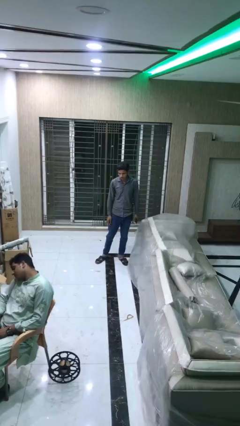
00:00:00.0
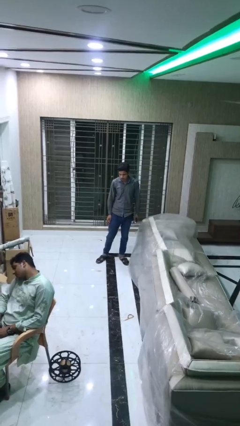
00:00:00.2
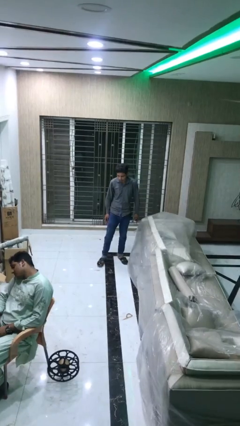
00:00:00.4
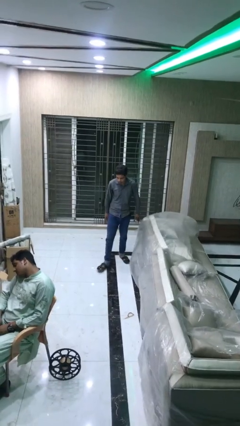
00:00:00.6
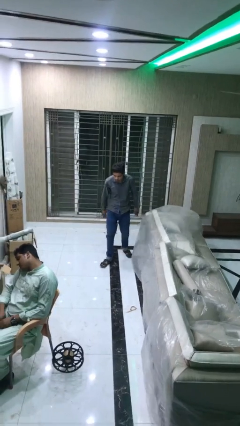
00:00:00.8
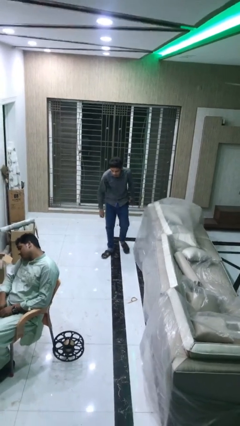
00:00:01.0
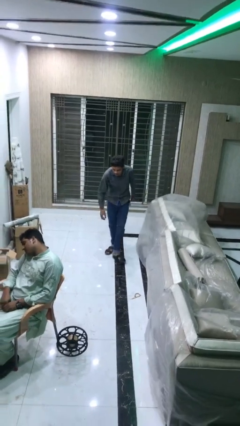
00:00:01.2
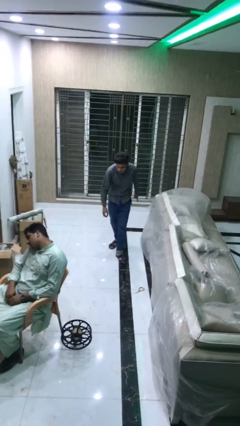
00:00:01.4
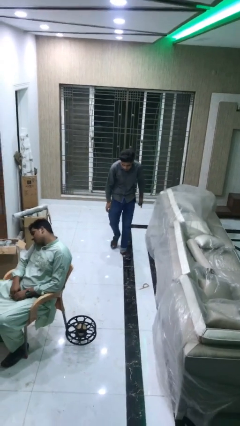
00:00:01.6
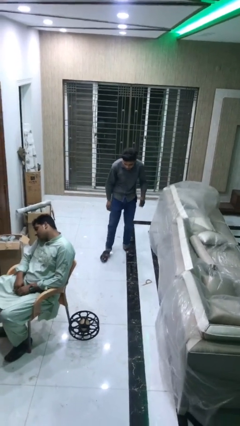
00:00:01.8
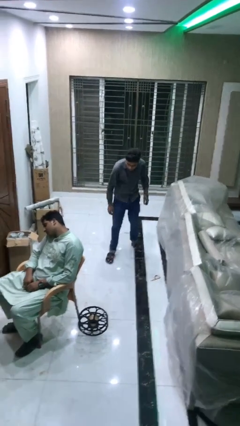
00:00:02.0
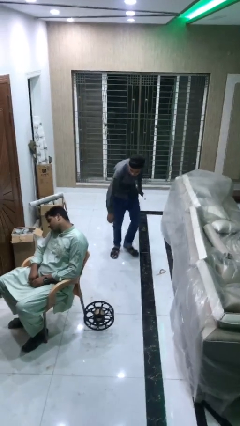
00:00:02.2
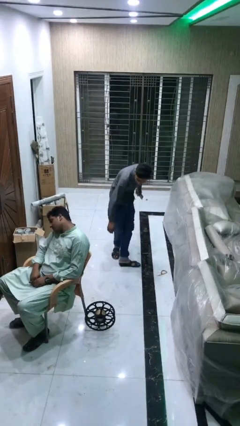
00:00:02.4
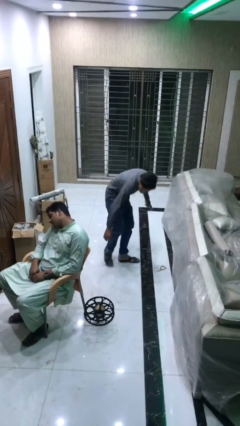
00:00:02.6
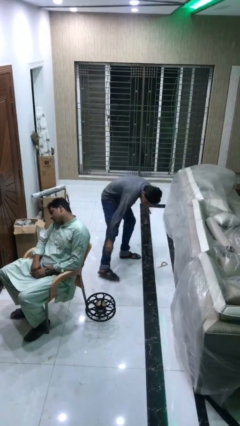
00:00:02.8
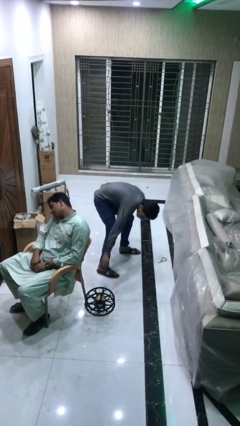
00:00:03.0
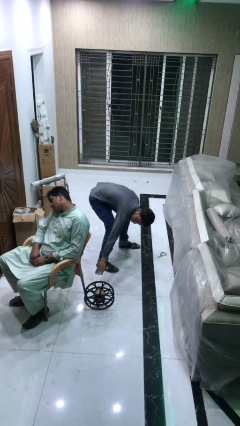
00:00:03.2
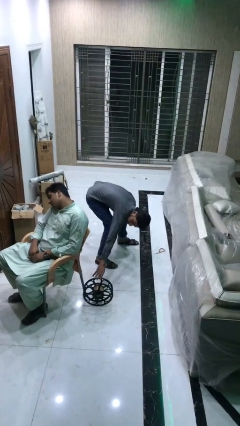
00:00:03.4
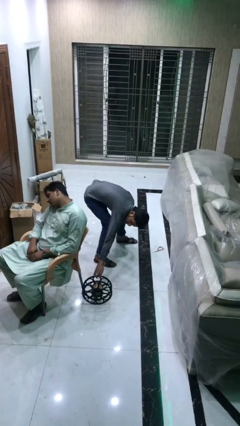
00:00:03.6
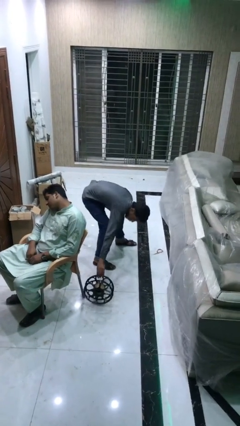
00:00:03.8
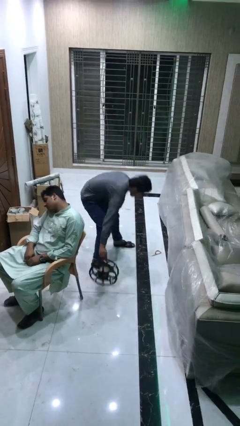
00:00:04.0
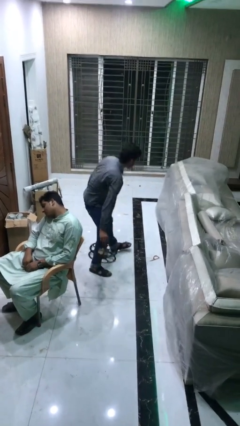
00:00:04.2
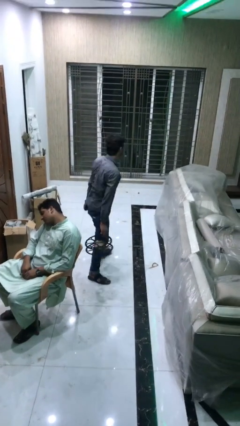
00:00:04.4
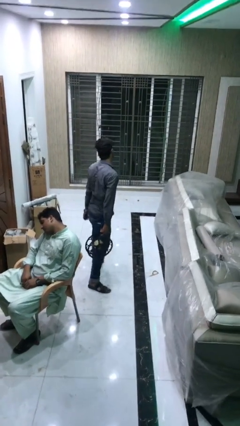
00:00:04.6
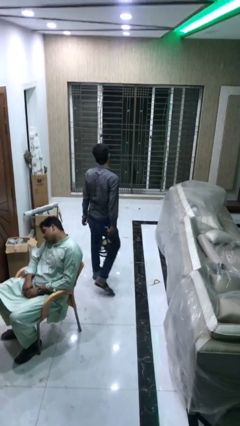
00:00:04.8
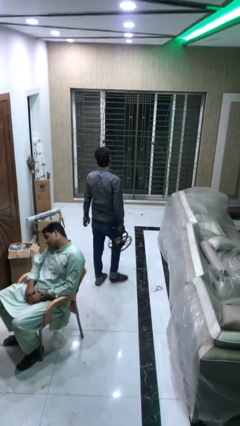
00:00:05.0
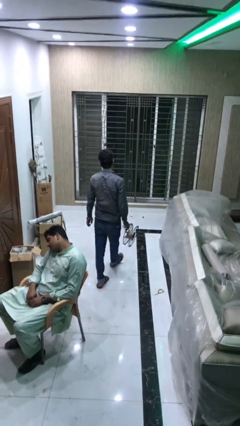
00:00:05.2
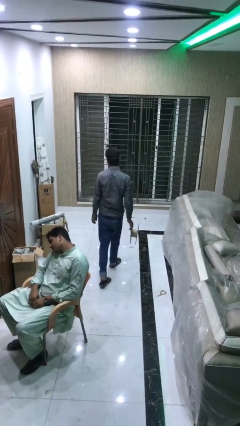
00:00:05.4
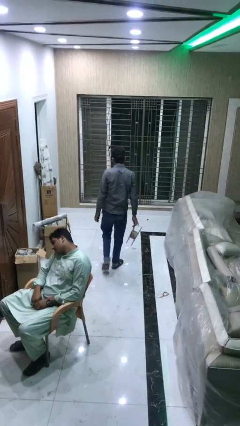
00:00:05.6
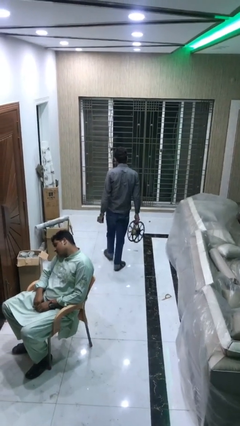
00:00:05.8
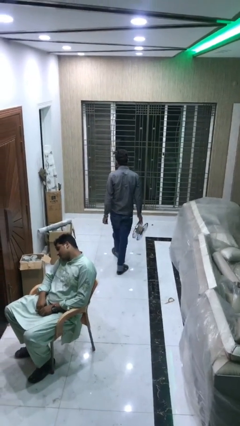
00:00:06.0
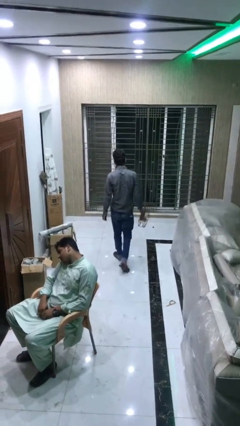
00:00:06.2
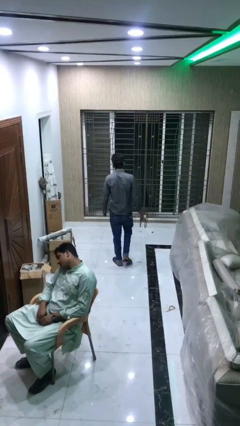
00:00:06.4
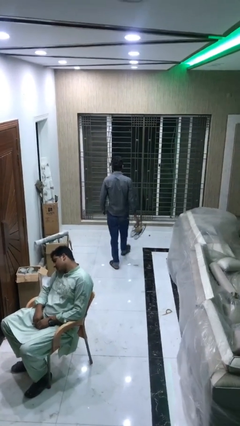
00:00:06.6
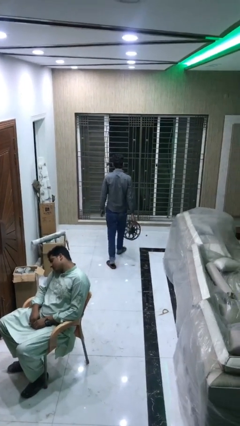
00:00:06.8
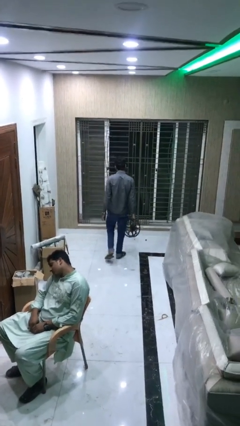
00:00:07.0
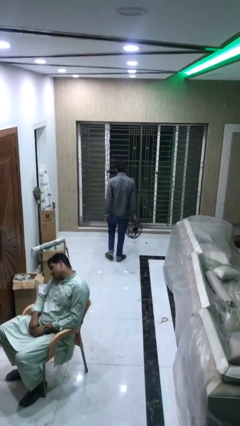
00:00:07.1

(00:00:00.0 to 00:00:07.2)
person steals object from person

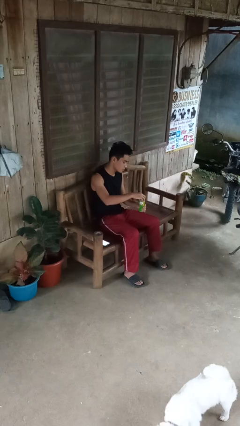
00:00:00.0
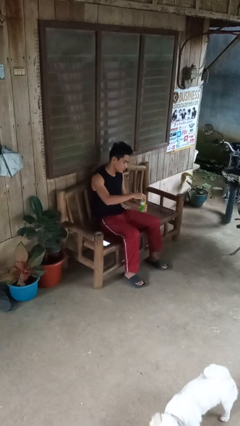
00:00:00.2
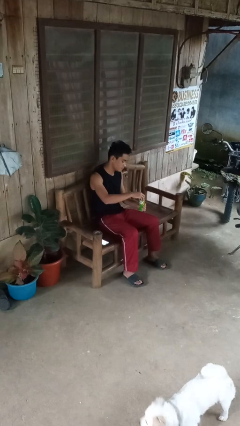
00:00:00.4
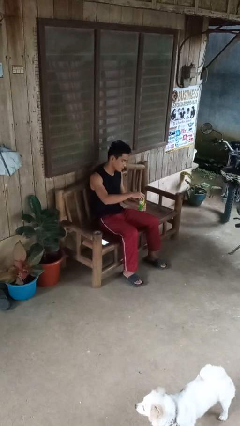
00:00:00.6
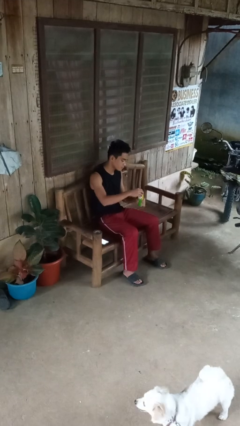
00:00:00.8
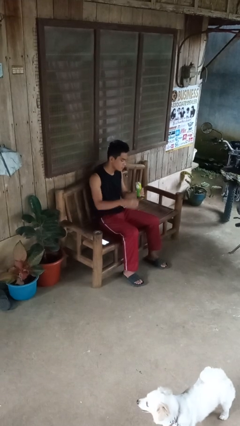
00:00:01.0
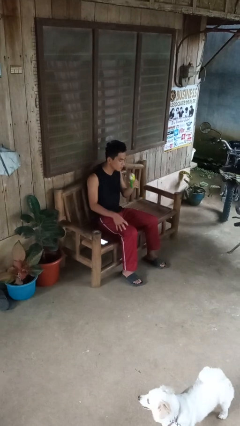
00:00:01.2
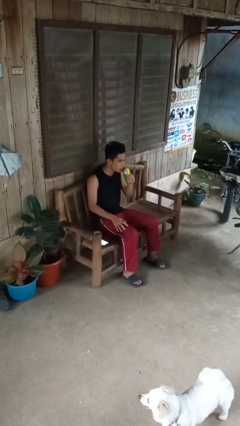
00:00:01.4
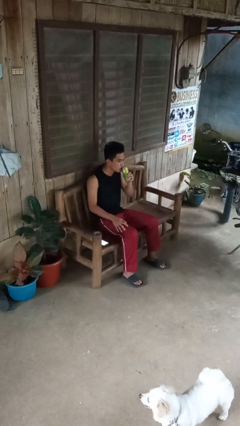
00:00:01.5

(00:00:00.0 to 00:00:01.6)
person opens beverage can

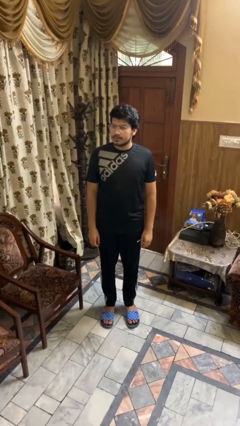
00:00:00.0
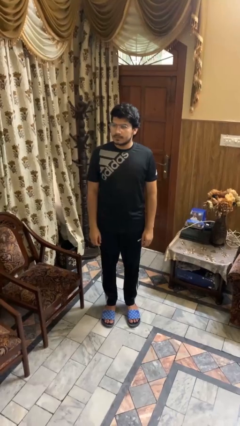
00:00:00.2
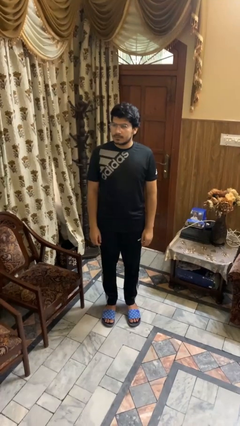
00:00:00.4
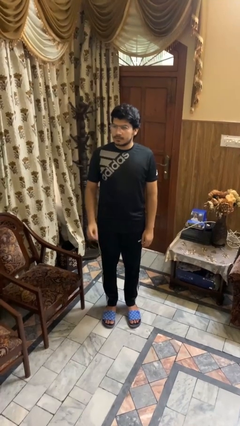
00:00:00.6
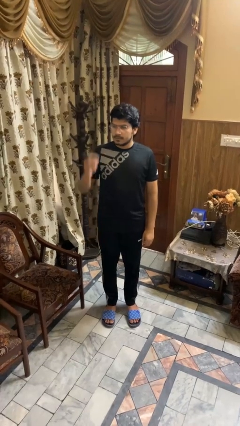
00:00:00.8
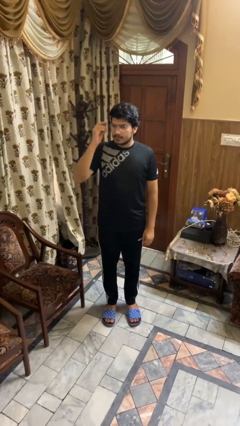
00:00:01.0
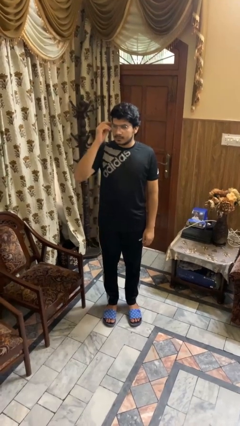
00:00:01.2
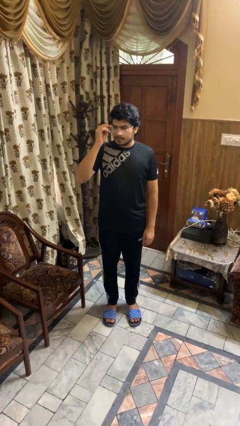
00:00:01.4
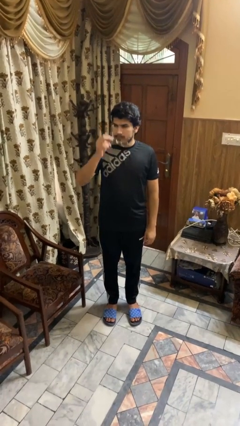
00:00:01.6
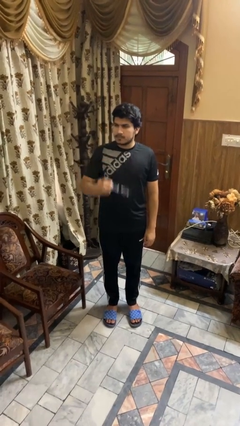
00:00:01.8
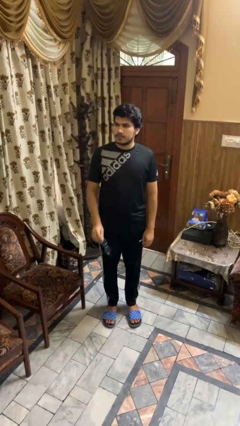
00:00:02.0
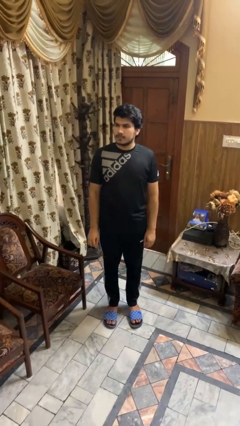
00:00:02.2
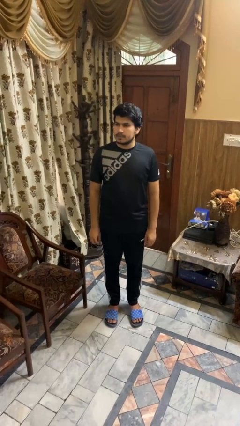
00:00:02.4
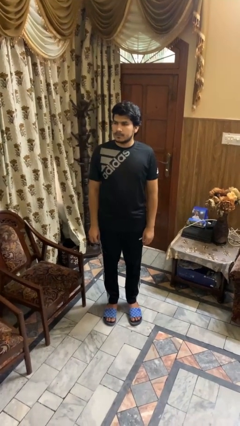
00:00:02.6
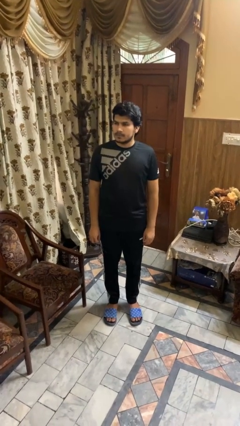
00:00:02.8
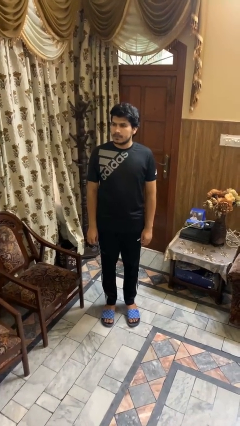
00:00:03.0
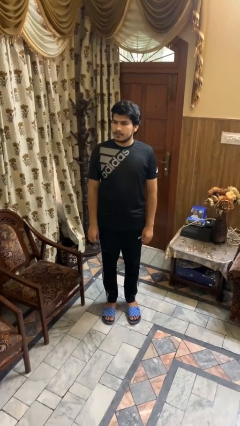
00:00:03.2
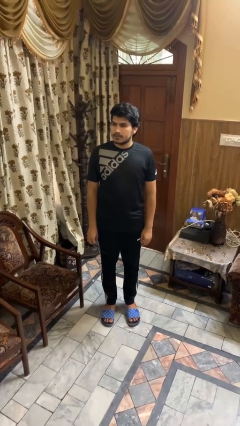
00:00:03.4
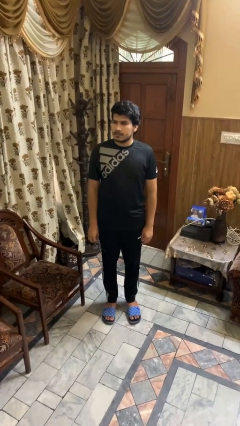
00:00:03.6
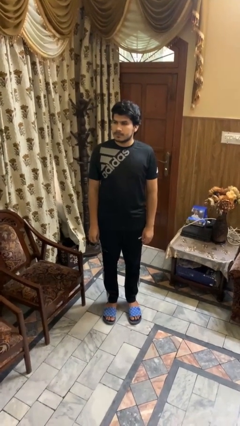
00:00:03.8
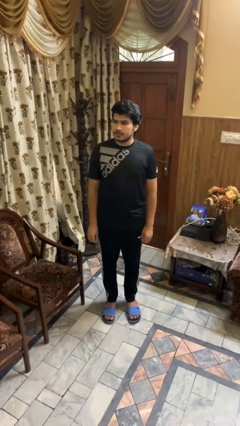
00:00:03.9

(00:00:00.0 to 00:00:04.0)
person takes off glasses

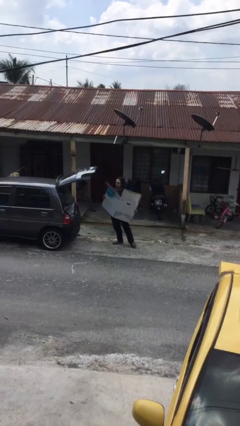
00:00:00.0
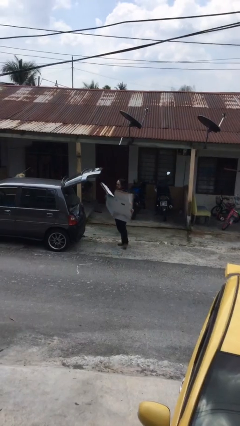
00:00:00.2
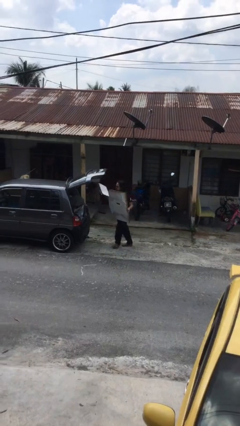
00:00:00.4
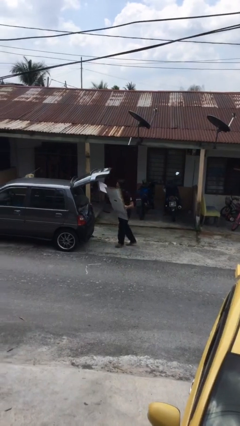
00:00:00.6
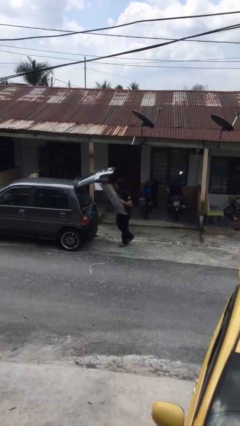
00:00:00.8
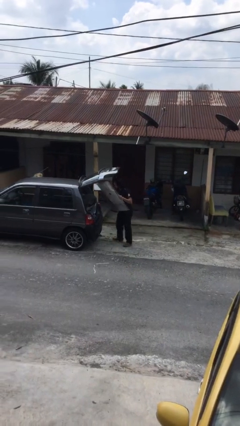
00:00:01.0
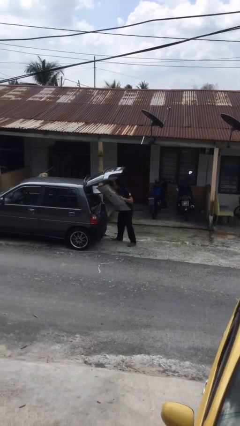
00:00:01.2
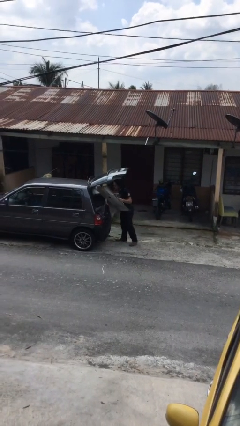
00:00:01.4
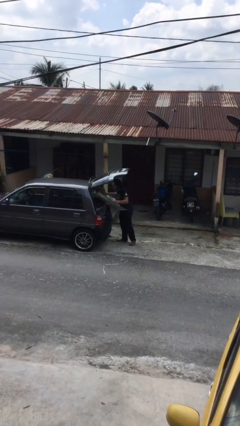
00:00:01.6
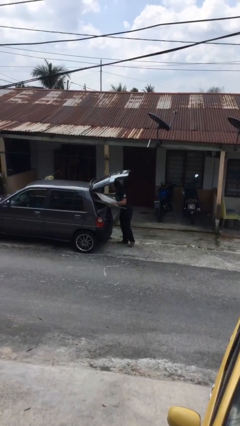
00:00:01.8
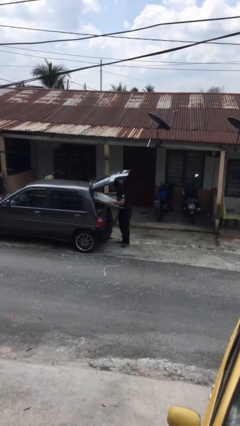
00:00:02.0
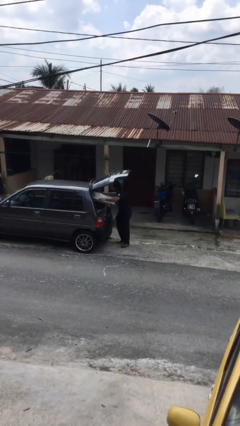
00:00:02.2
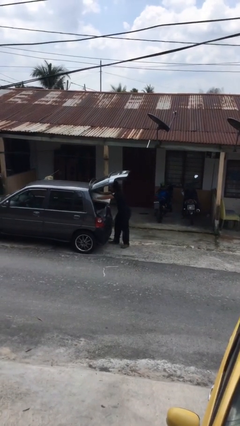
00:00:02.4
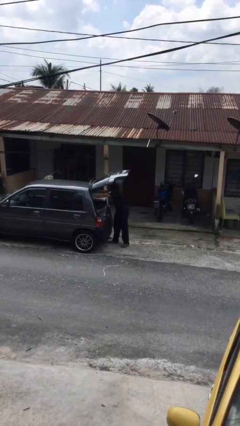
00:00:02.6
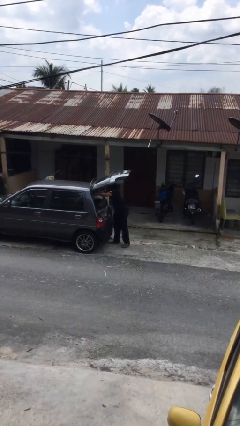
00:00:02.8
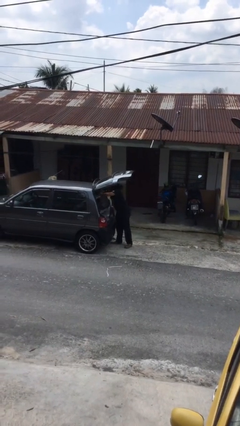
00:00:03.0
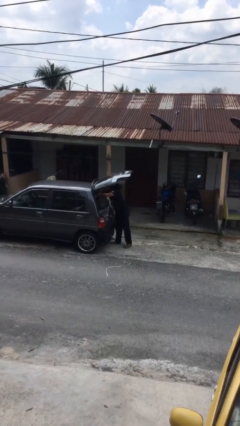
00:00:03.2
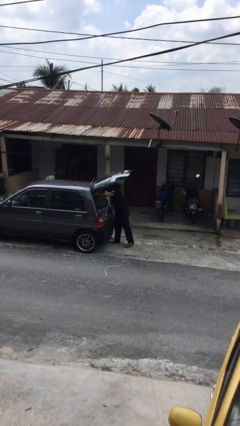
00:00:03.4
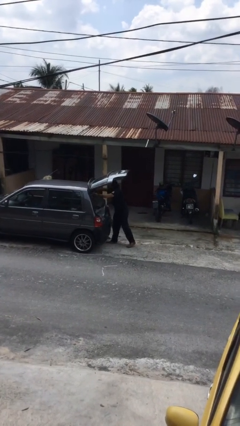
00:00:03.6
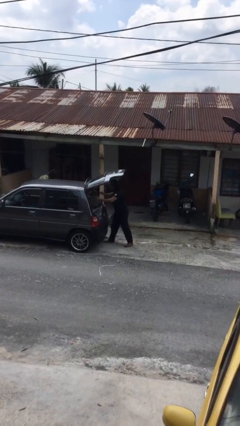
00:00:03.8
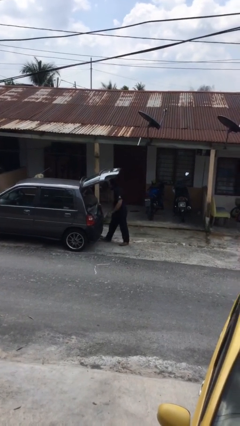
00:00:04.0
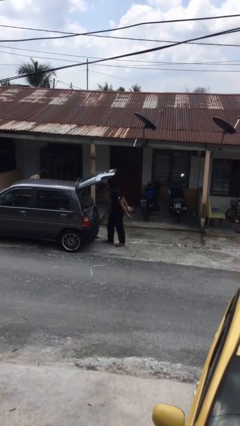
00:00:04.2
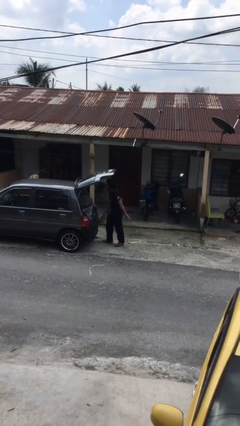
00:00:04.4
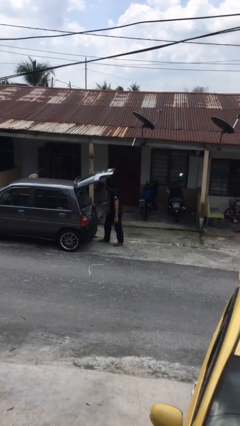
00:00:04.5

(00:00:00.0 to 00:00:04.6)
person loads car
